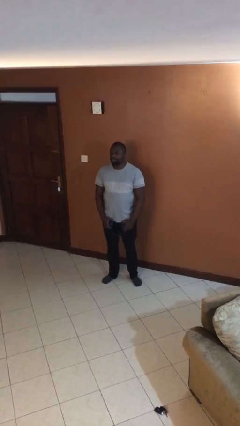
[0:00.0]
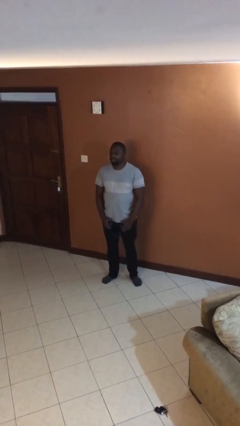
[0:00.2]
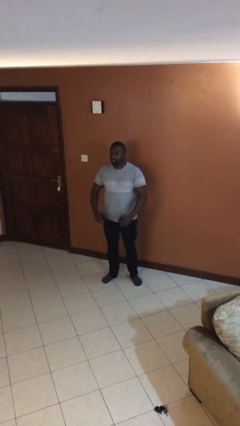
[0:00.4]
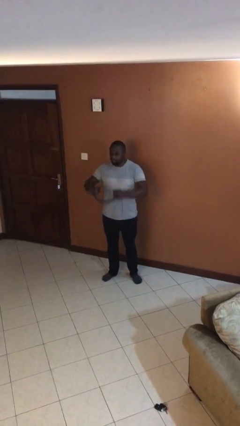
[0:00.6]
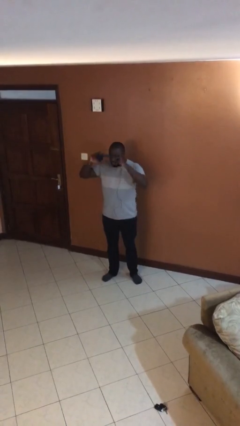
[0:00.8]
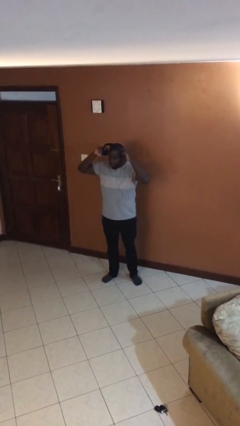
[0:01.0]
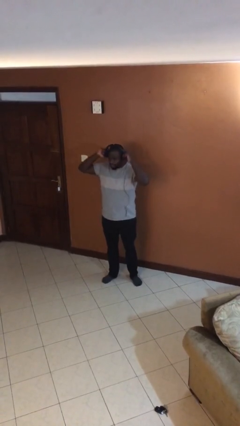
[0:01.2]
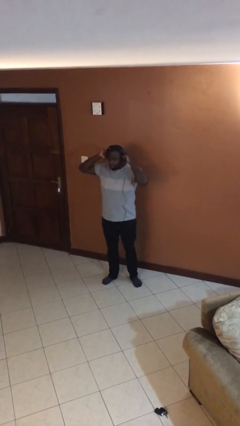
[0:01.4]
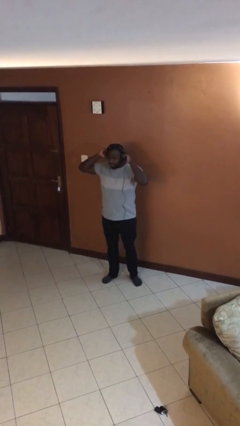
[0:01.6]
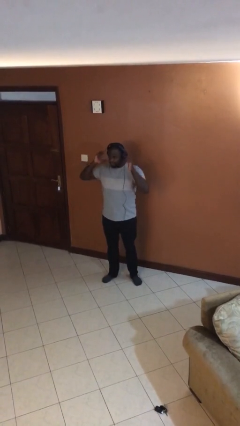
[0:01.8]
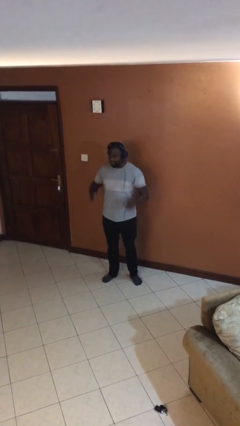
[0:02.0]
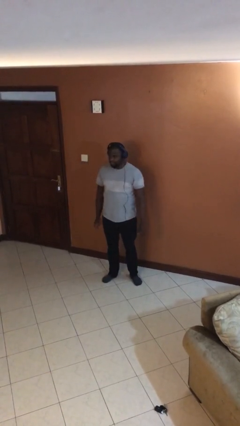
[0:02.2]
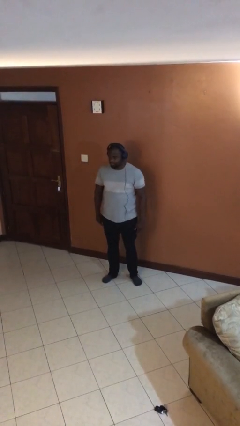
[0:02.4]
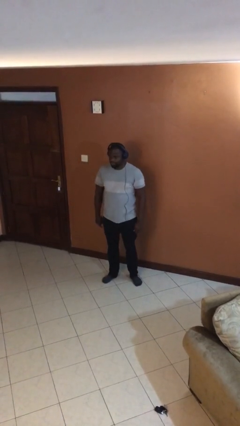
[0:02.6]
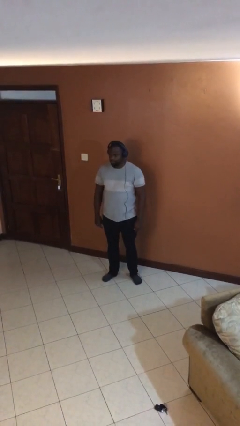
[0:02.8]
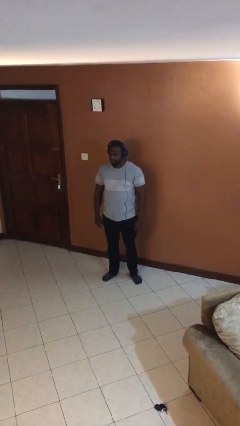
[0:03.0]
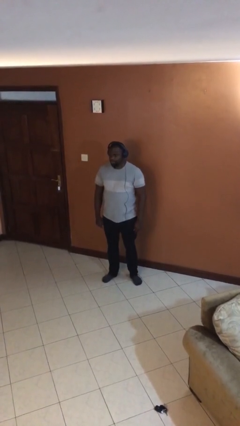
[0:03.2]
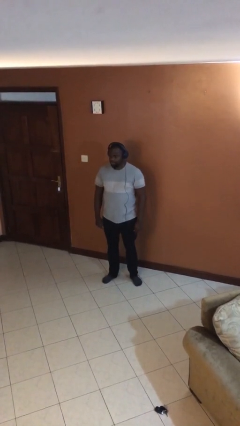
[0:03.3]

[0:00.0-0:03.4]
person puts on headphones

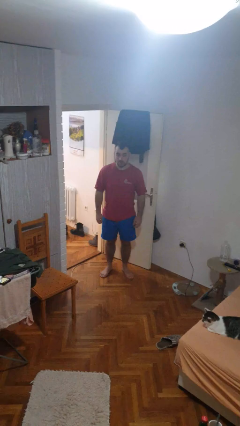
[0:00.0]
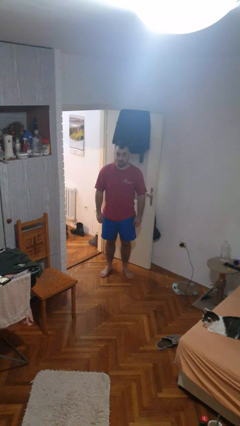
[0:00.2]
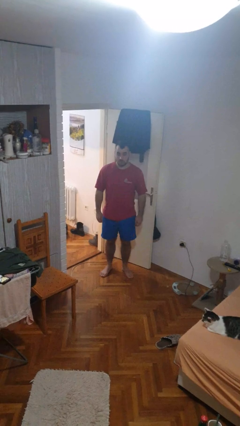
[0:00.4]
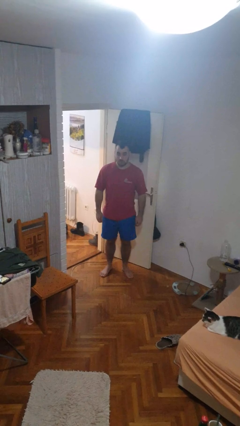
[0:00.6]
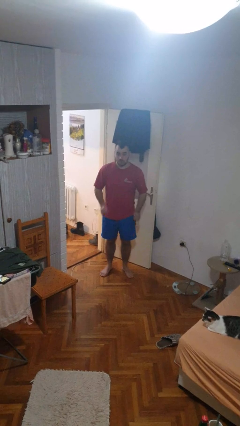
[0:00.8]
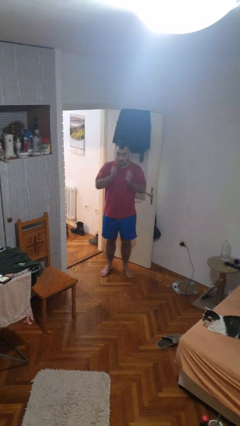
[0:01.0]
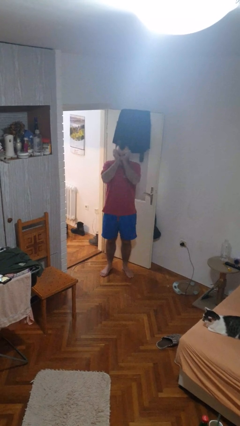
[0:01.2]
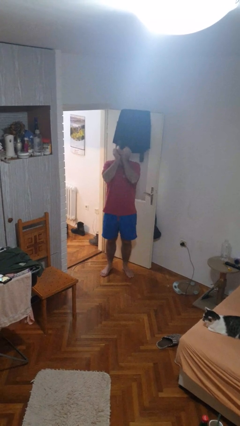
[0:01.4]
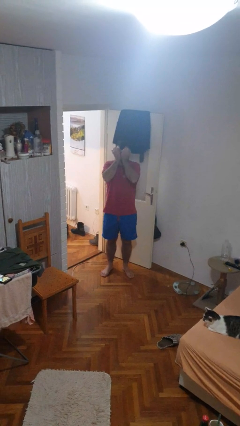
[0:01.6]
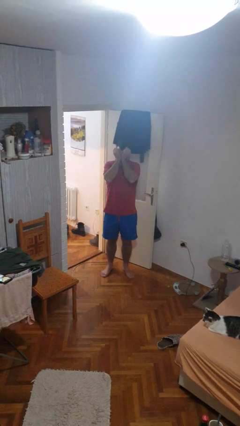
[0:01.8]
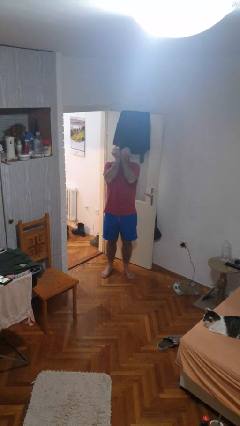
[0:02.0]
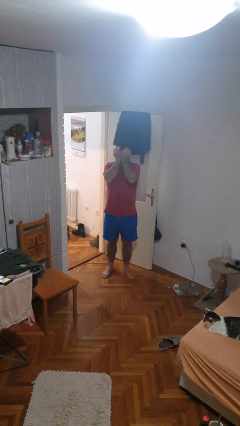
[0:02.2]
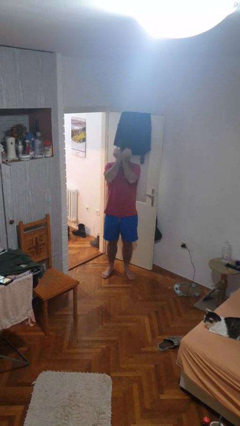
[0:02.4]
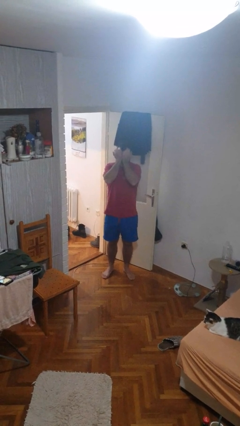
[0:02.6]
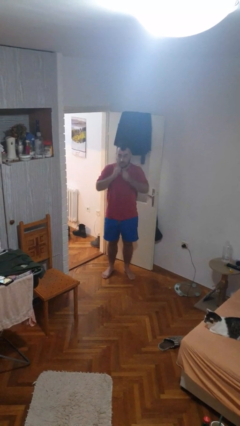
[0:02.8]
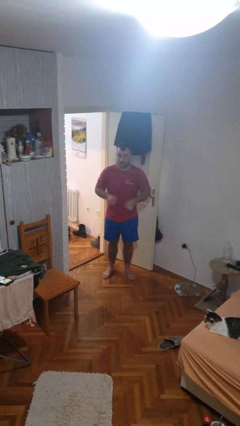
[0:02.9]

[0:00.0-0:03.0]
person rubs eyes

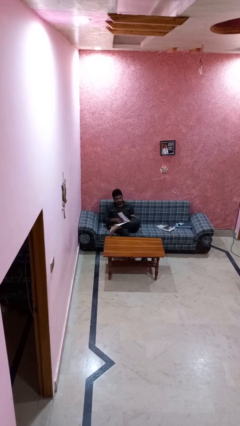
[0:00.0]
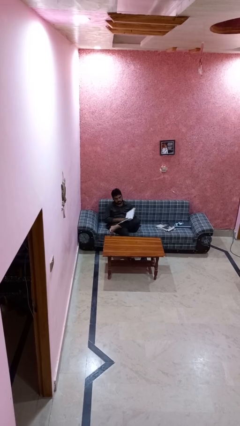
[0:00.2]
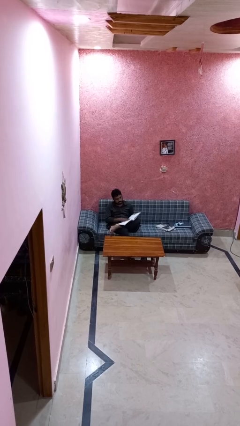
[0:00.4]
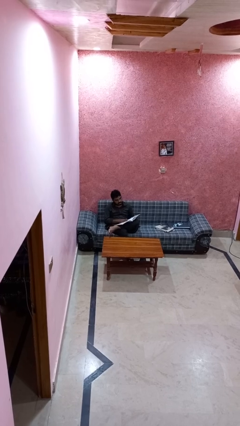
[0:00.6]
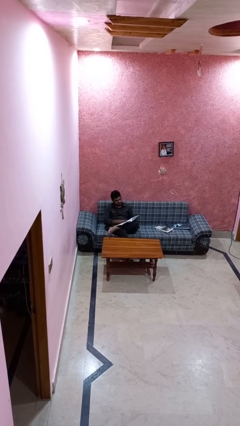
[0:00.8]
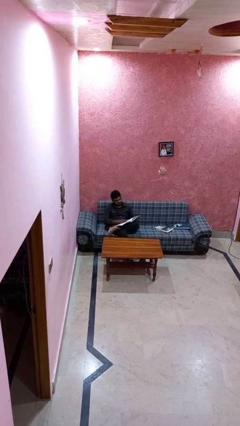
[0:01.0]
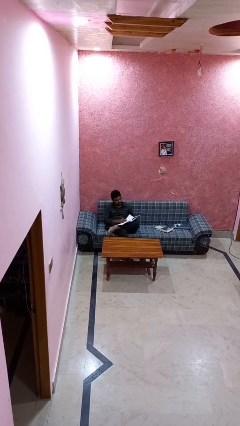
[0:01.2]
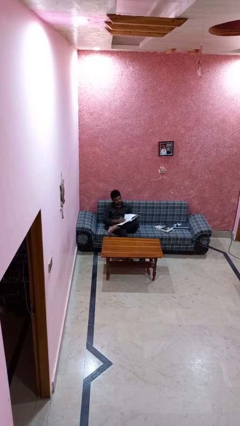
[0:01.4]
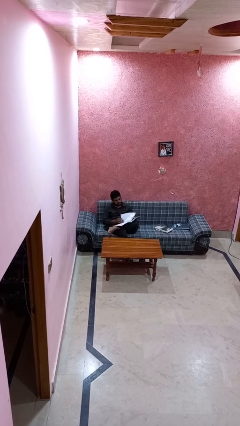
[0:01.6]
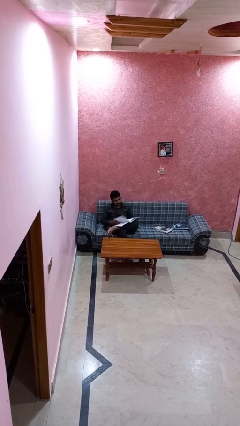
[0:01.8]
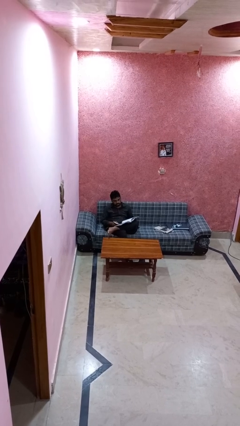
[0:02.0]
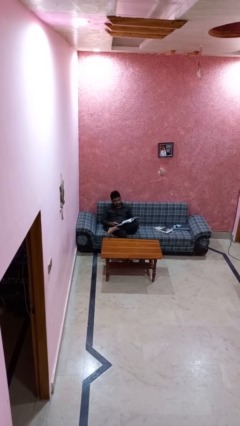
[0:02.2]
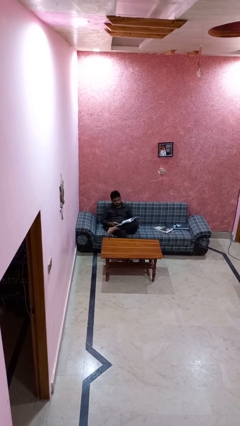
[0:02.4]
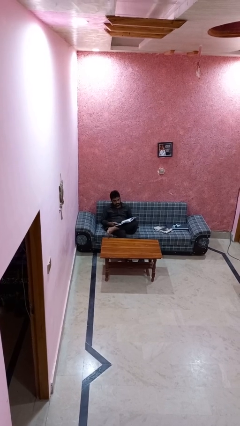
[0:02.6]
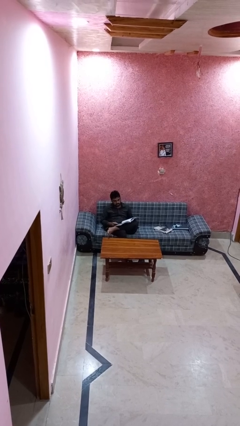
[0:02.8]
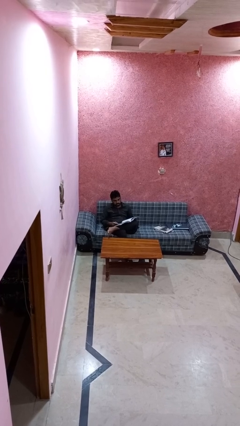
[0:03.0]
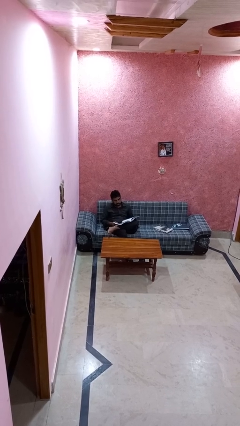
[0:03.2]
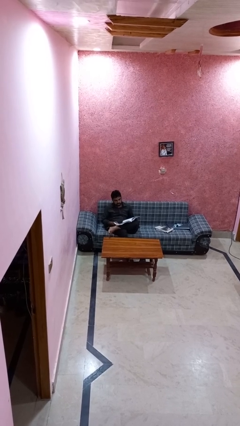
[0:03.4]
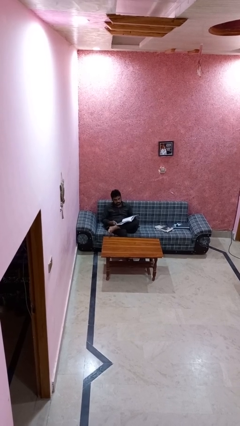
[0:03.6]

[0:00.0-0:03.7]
person reads magazine

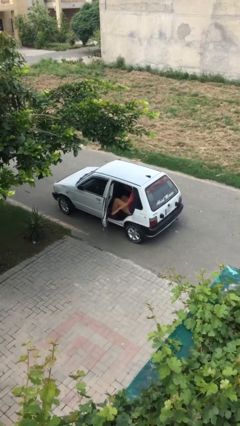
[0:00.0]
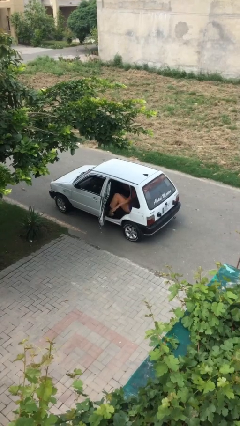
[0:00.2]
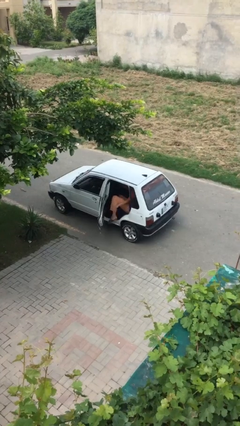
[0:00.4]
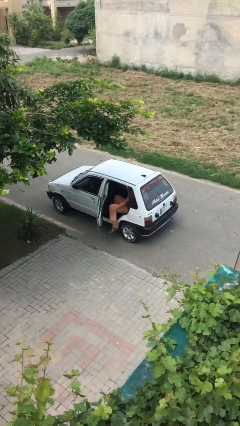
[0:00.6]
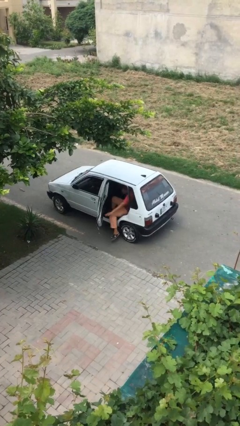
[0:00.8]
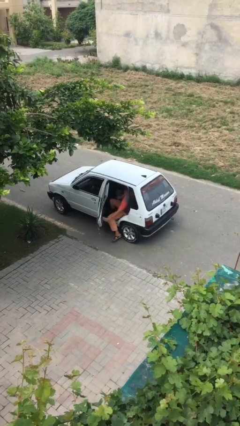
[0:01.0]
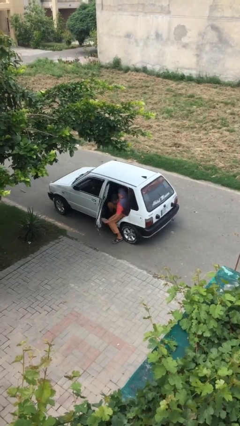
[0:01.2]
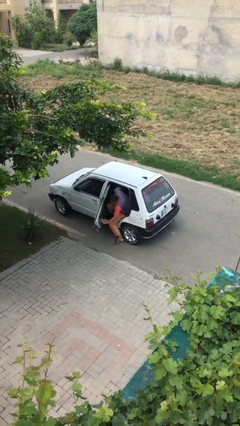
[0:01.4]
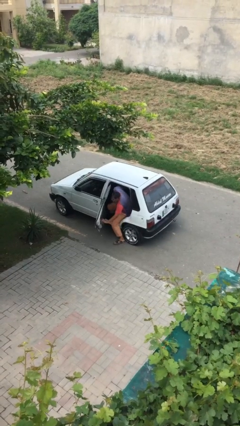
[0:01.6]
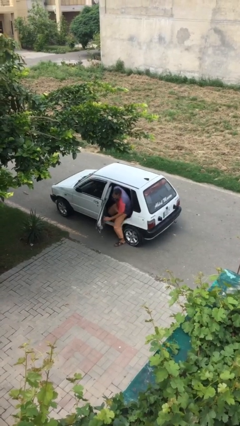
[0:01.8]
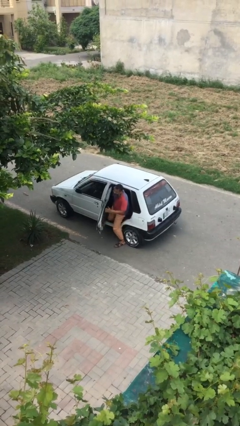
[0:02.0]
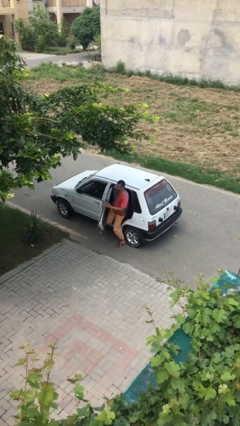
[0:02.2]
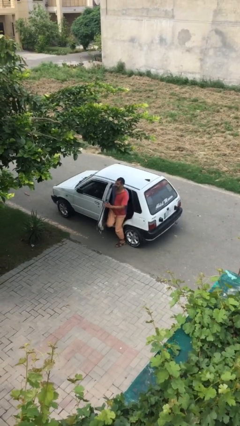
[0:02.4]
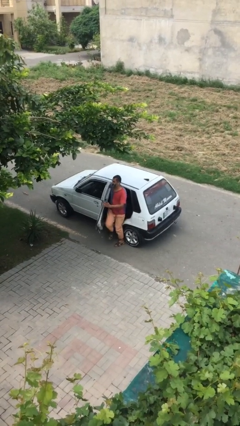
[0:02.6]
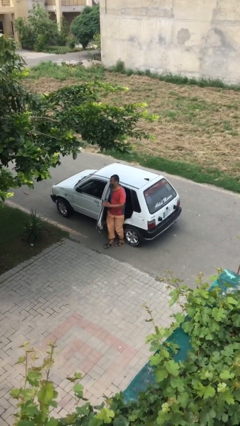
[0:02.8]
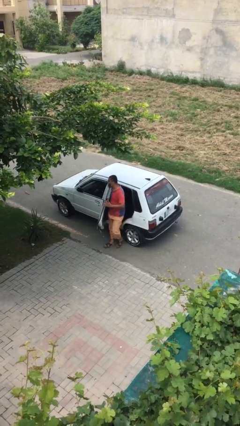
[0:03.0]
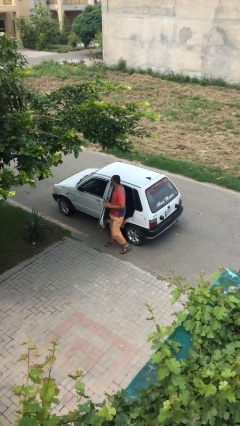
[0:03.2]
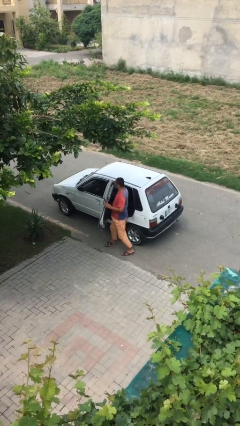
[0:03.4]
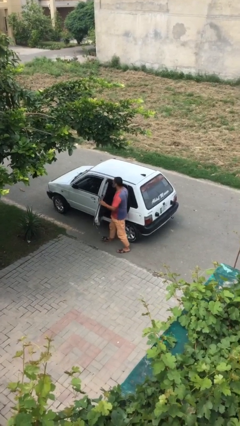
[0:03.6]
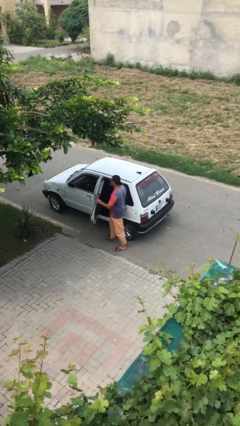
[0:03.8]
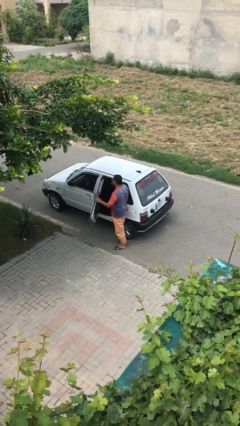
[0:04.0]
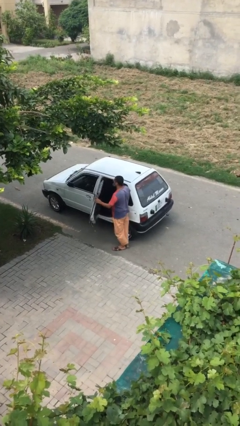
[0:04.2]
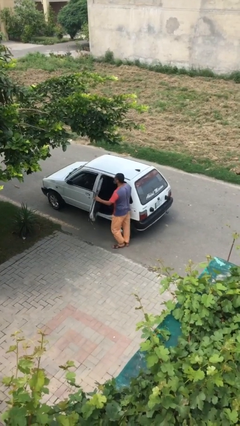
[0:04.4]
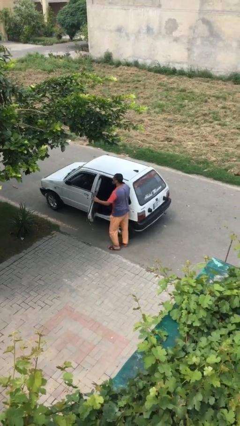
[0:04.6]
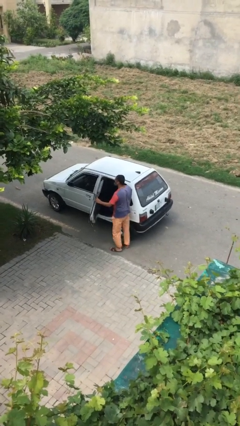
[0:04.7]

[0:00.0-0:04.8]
person exits car

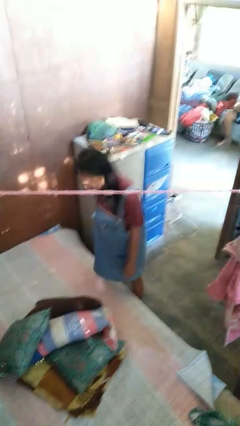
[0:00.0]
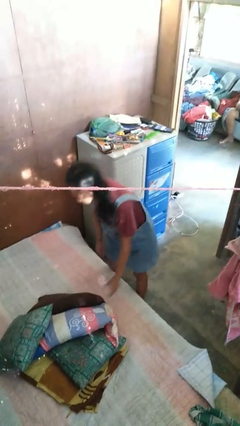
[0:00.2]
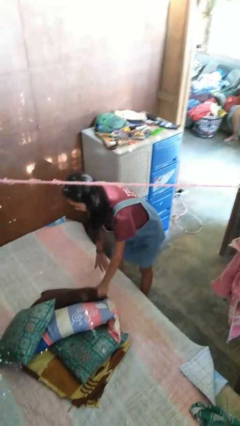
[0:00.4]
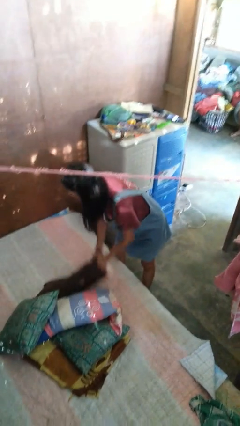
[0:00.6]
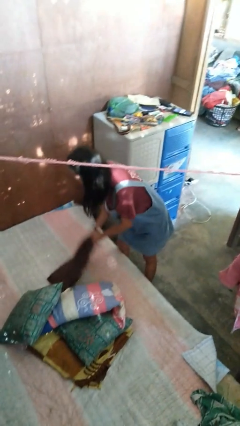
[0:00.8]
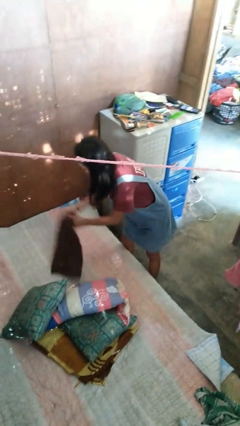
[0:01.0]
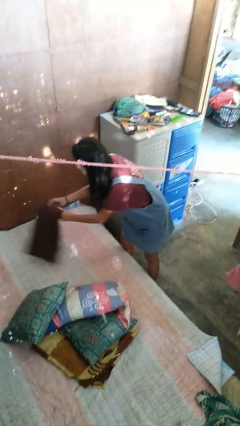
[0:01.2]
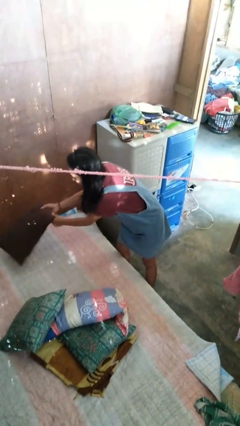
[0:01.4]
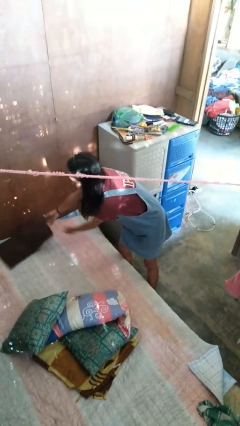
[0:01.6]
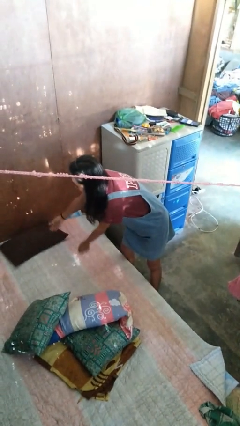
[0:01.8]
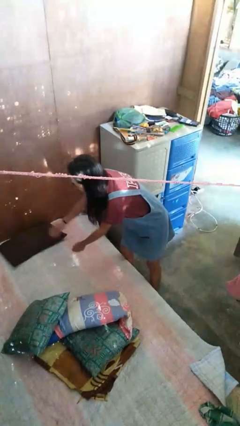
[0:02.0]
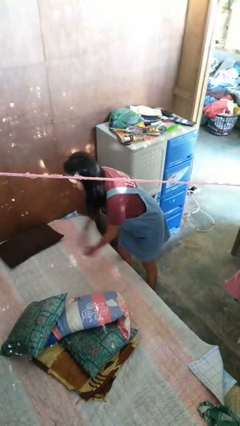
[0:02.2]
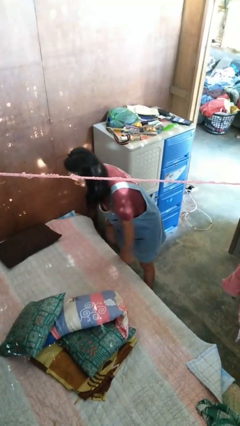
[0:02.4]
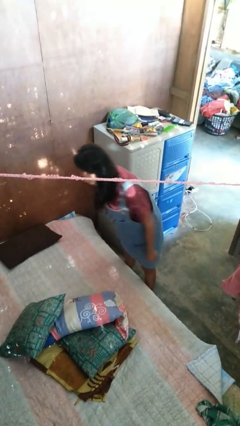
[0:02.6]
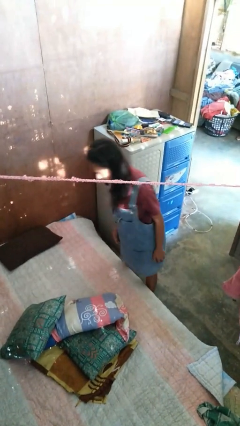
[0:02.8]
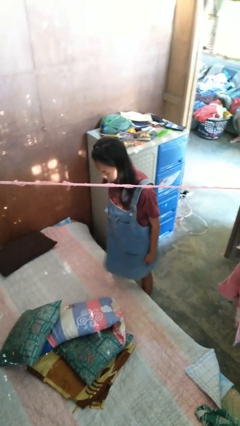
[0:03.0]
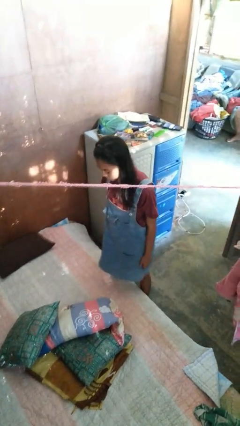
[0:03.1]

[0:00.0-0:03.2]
person makes bed
